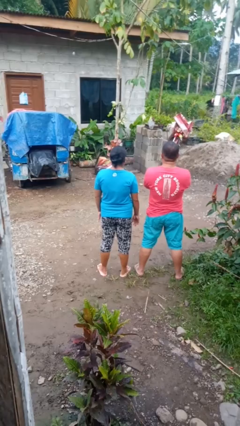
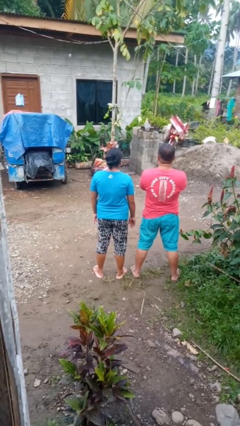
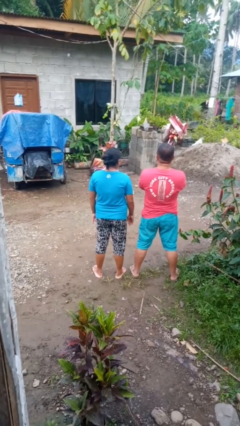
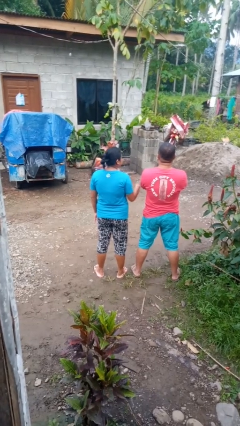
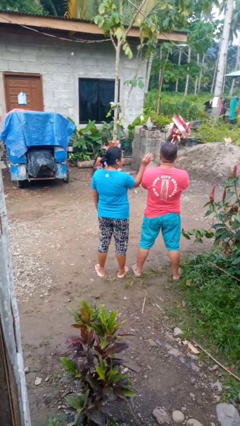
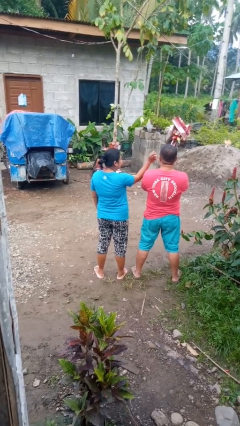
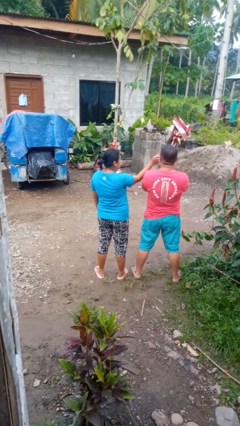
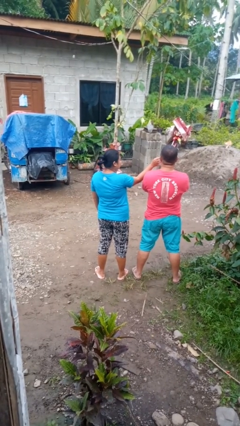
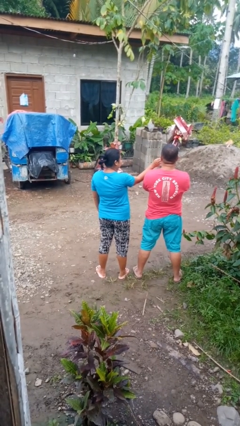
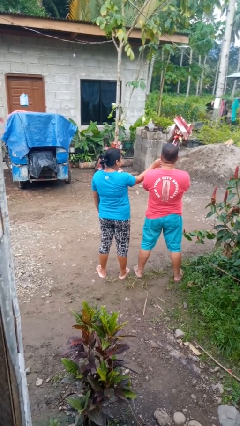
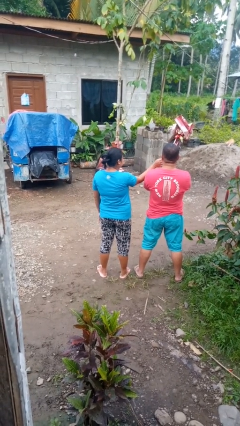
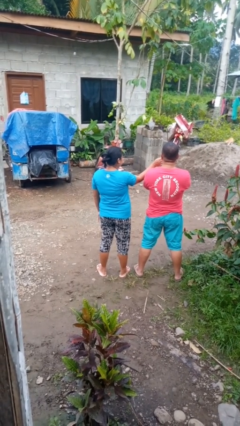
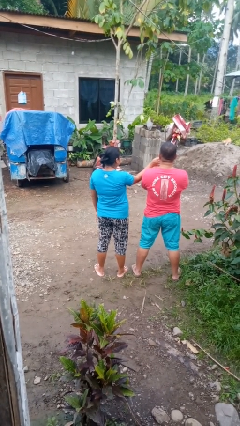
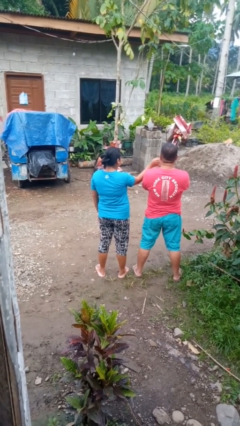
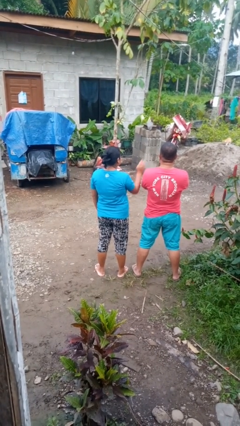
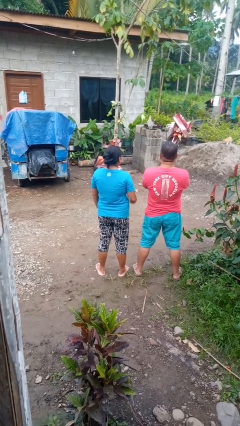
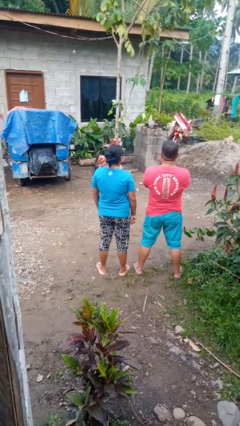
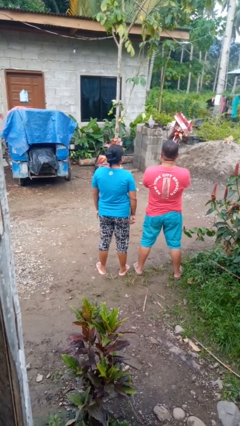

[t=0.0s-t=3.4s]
person touches face of person

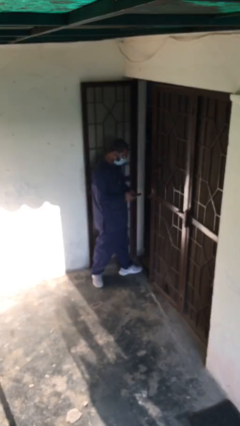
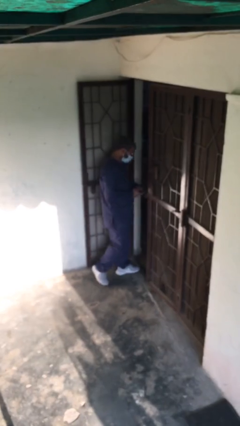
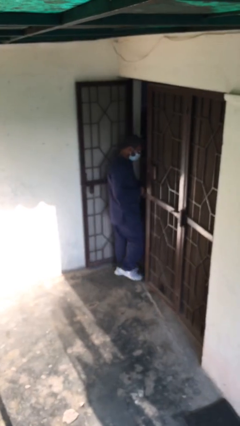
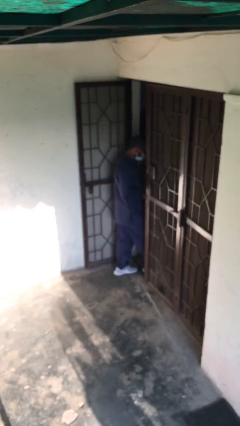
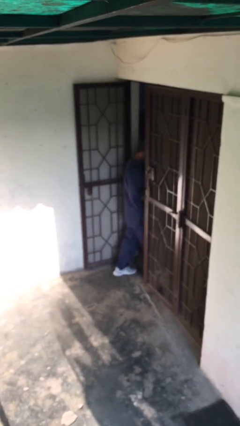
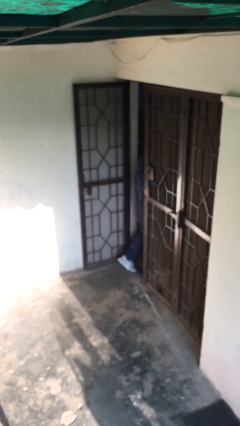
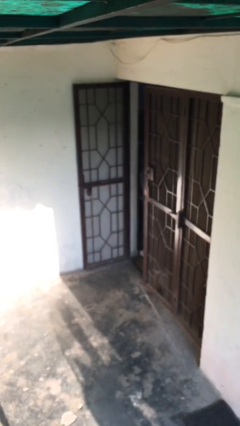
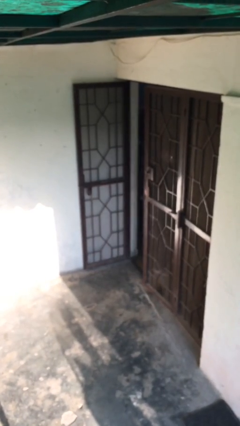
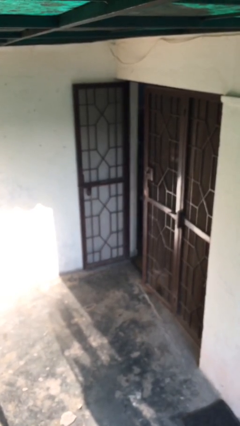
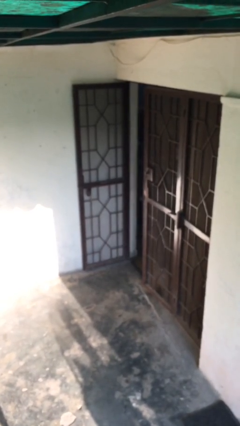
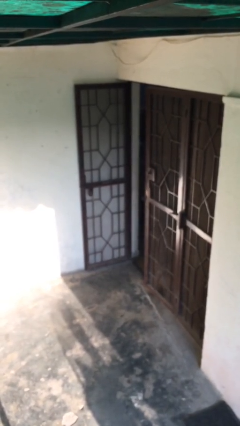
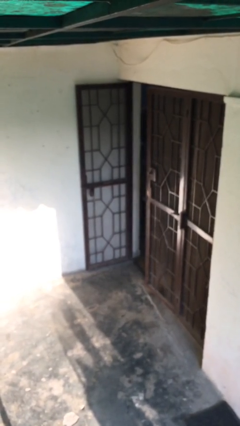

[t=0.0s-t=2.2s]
person exits scene through structure

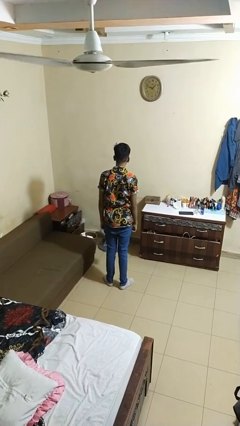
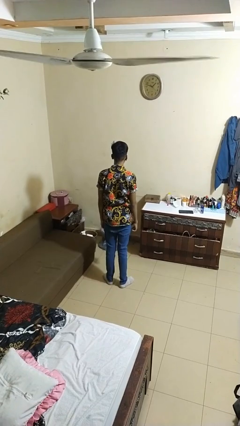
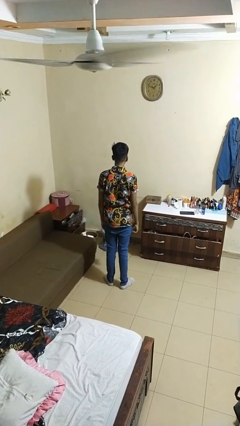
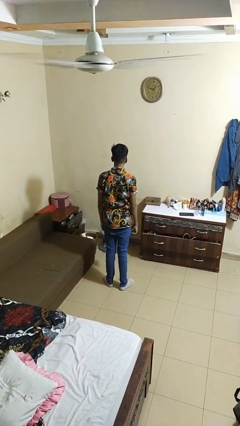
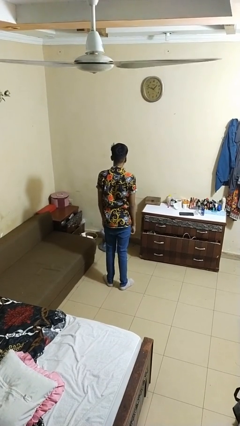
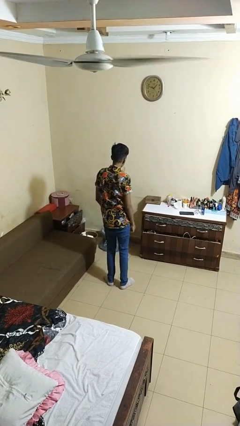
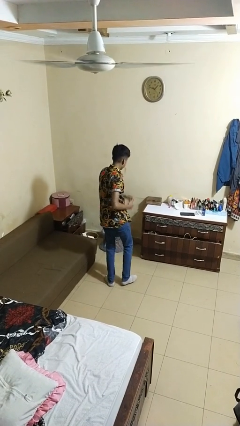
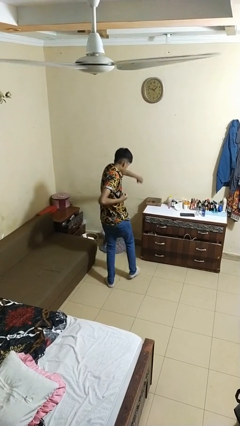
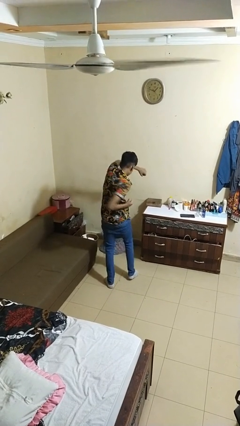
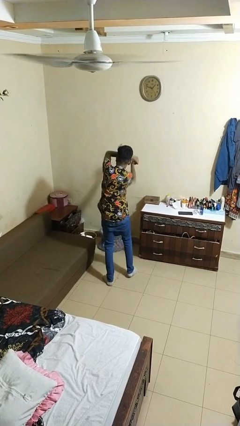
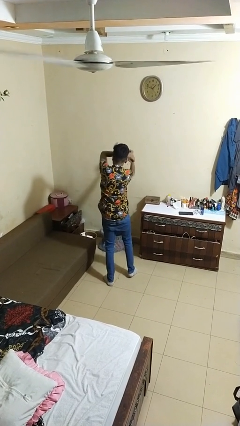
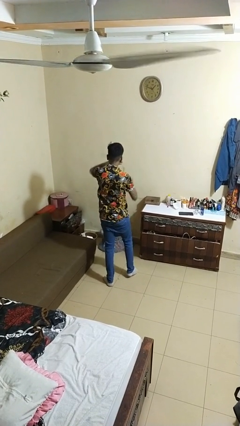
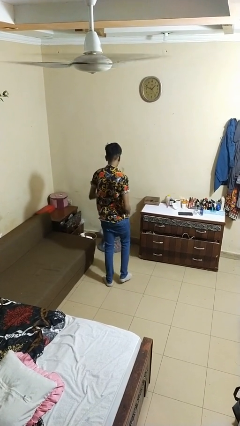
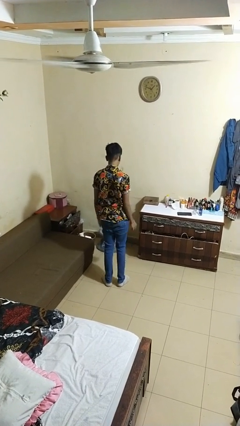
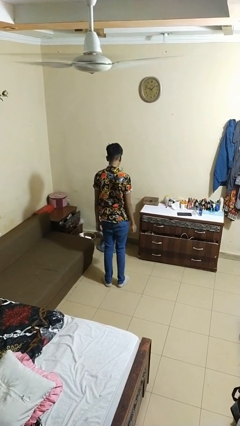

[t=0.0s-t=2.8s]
person punches

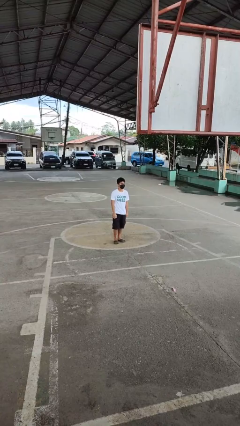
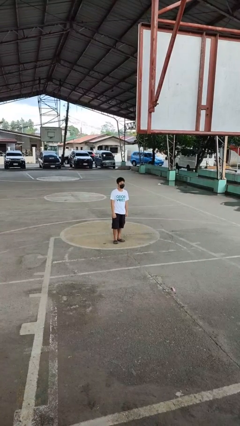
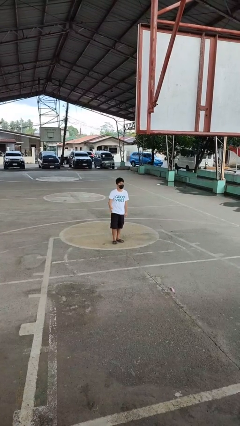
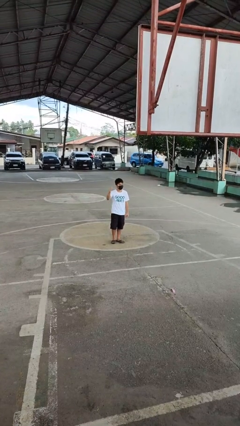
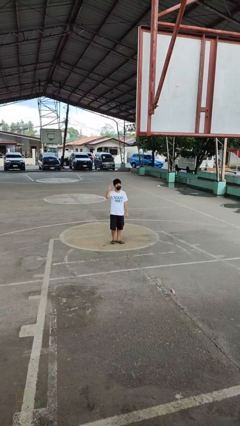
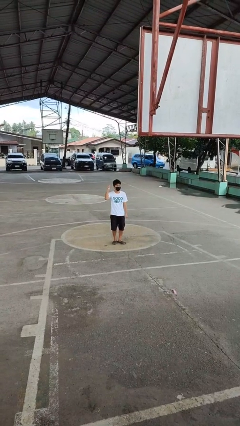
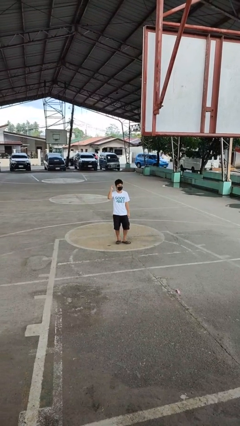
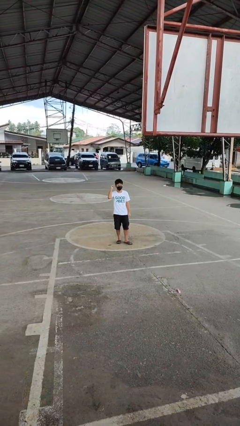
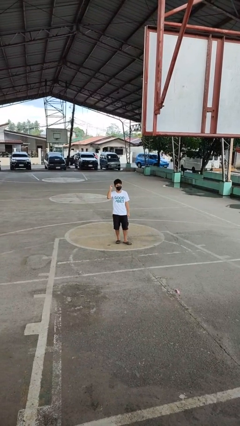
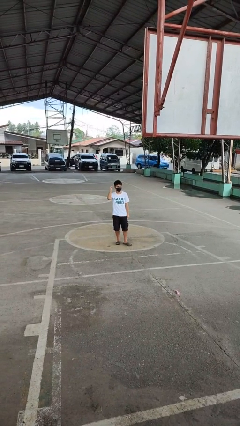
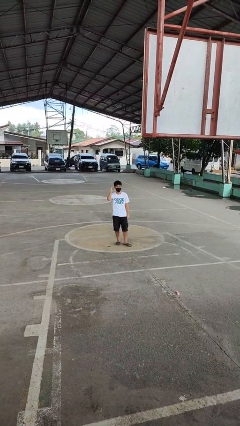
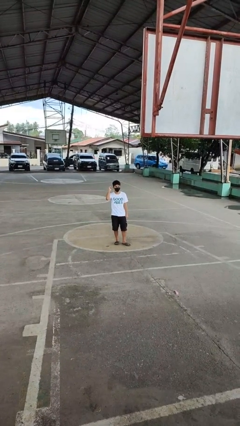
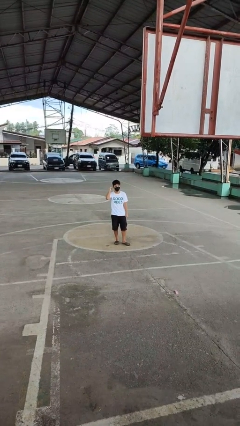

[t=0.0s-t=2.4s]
person gestures behind me

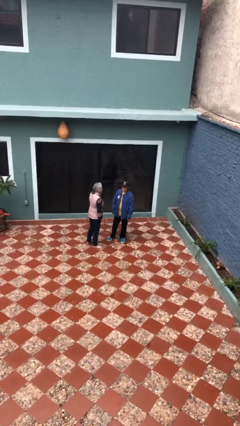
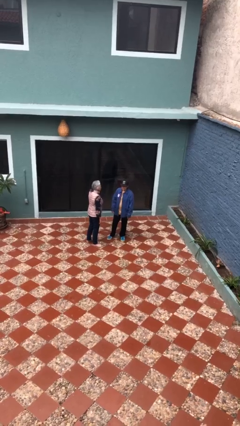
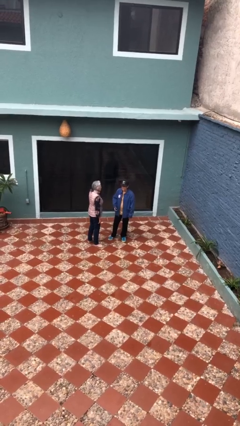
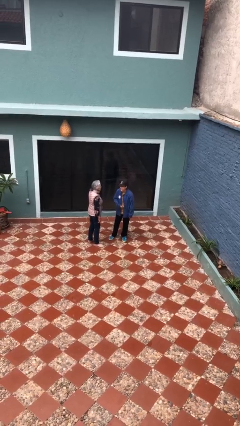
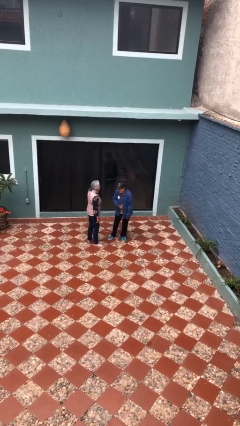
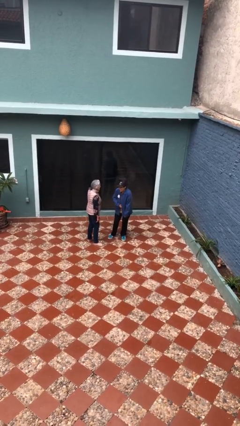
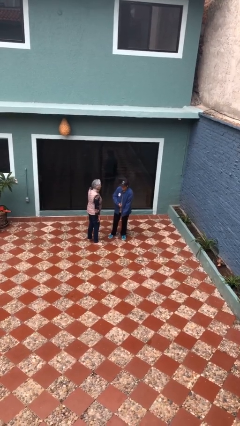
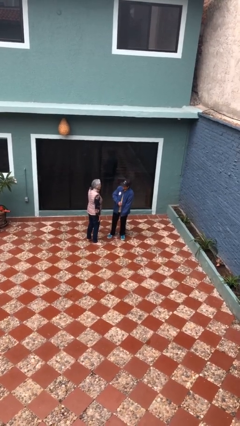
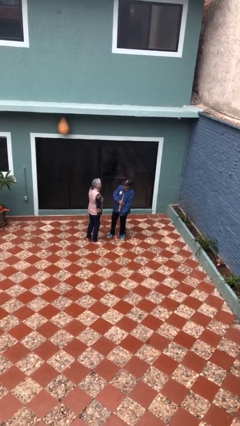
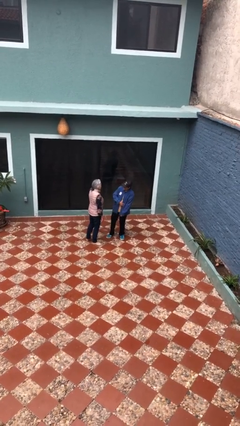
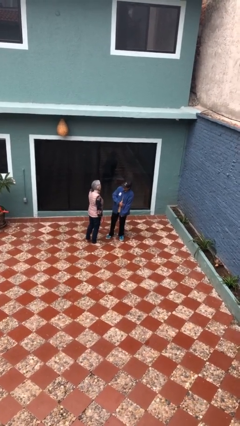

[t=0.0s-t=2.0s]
person laughs with person

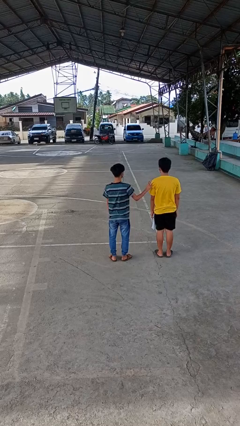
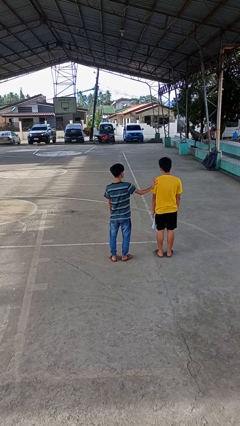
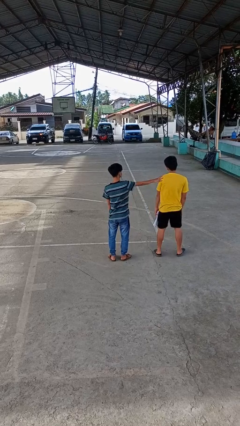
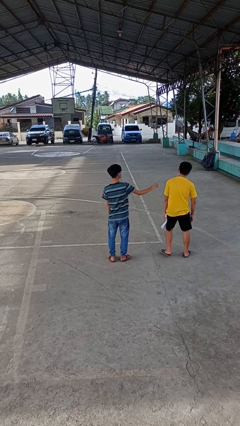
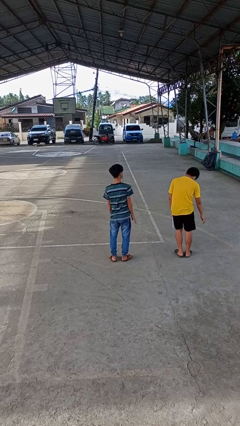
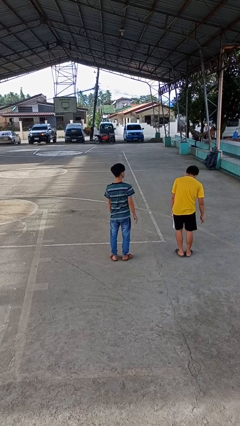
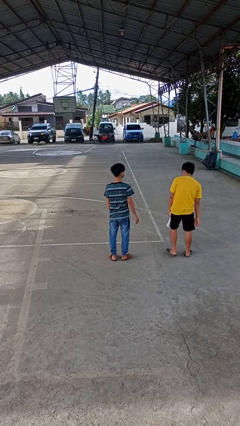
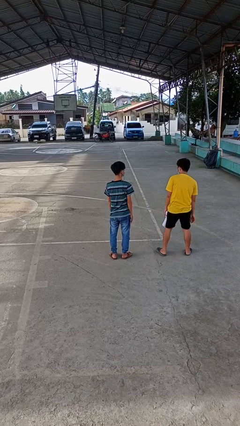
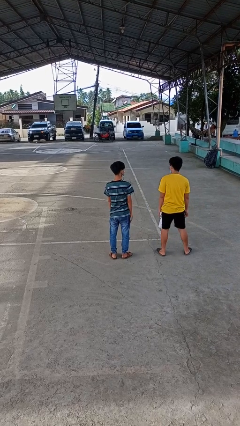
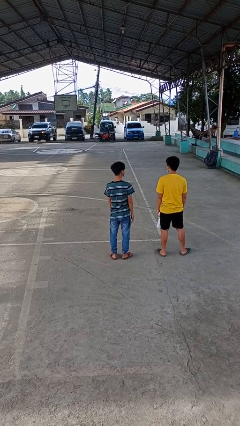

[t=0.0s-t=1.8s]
person shoves person

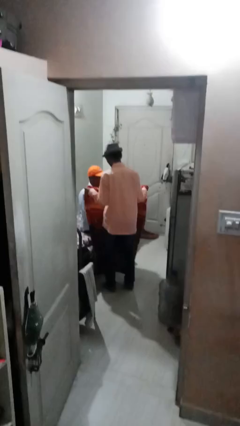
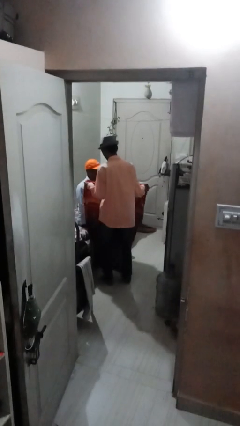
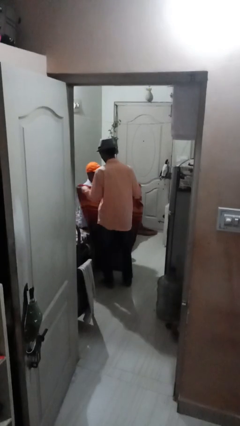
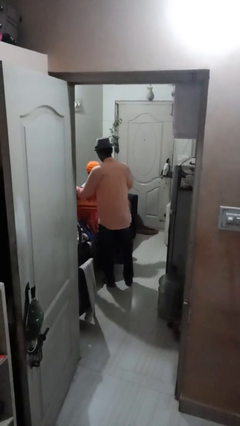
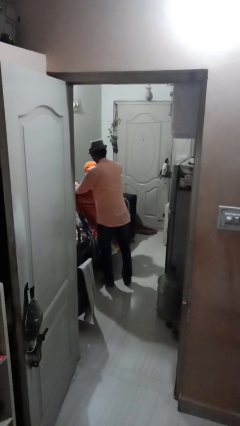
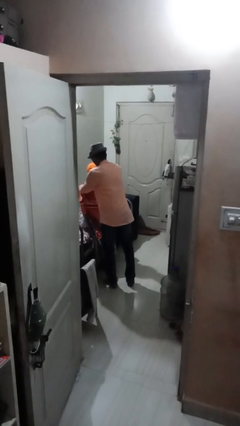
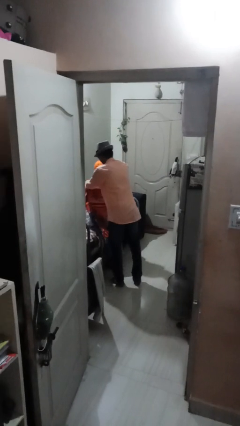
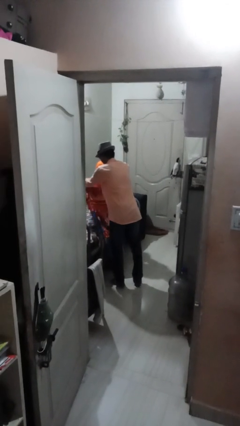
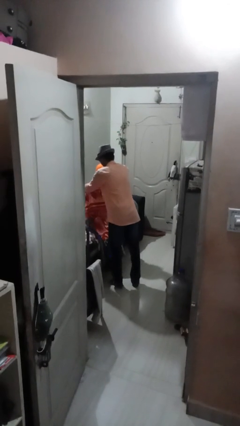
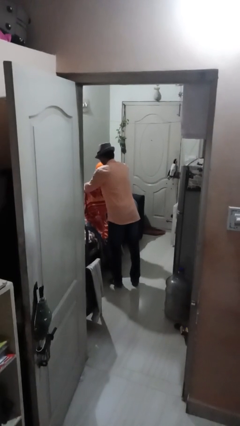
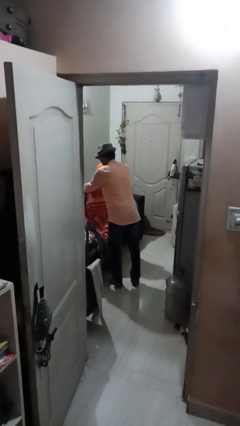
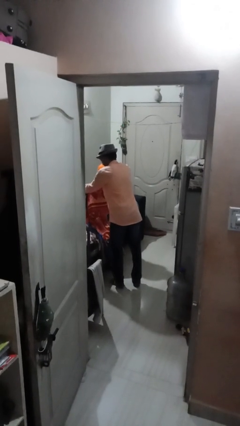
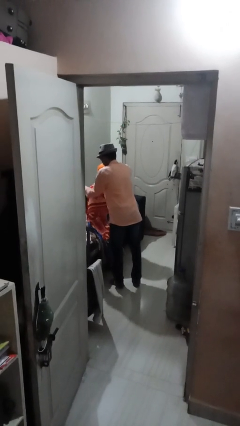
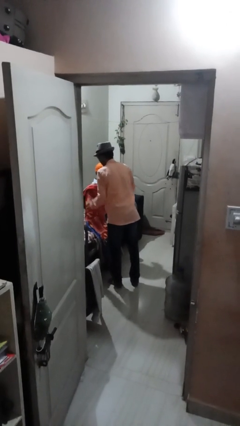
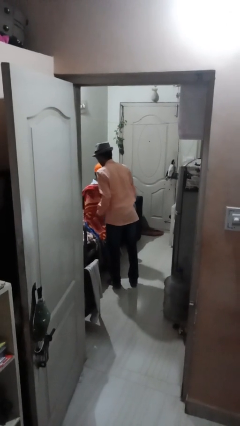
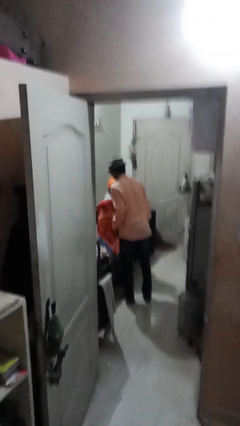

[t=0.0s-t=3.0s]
person covers friend with blanket
